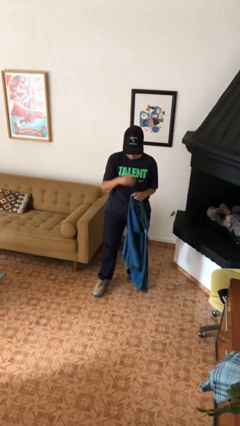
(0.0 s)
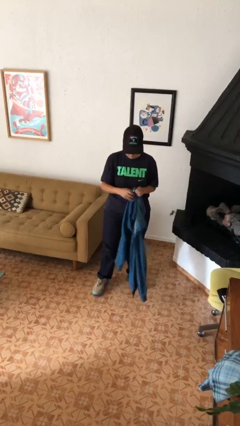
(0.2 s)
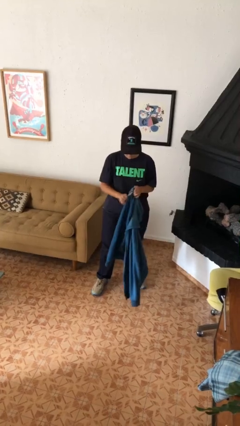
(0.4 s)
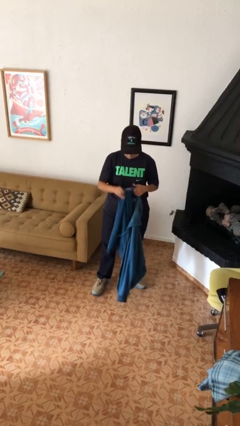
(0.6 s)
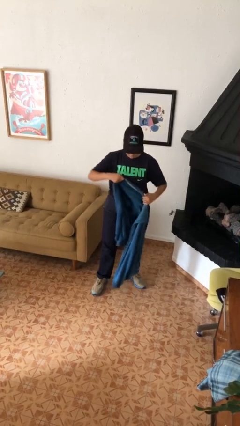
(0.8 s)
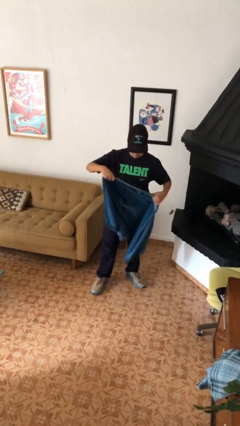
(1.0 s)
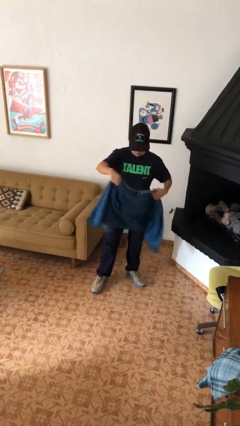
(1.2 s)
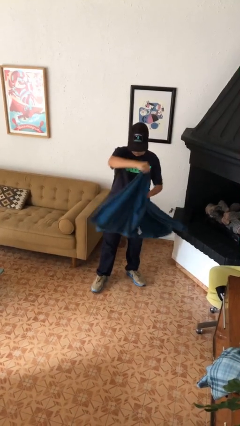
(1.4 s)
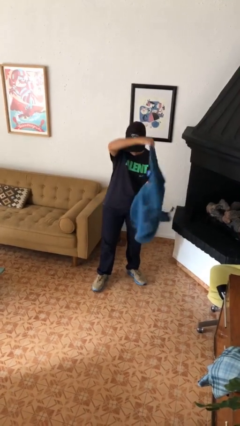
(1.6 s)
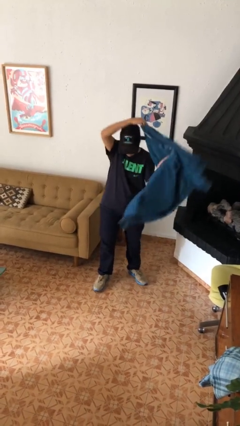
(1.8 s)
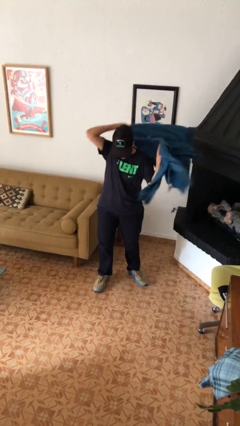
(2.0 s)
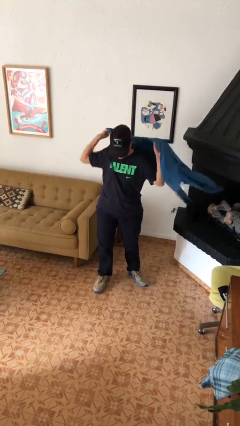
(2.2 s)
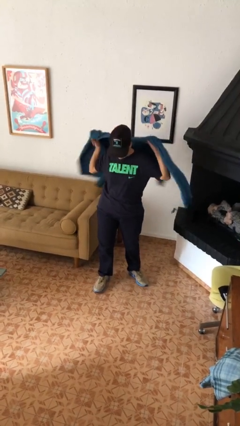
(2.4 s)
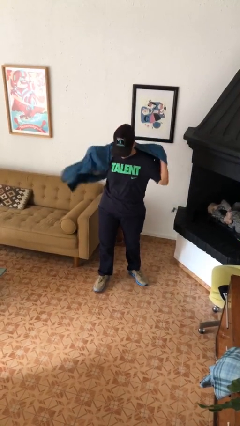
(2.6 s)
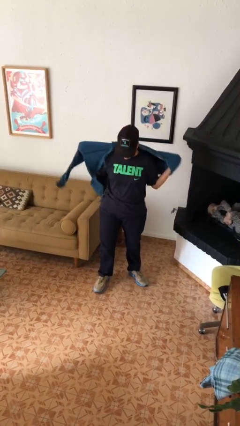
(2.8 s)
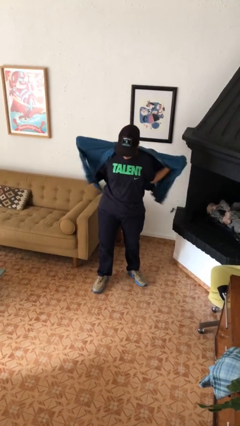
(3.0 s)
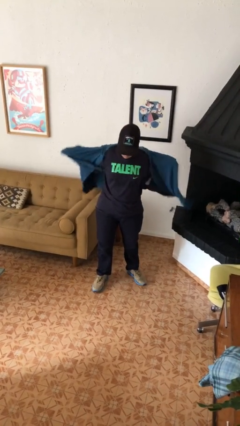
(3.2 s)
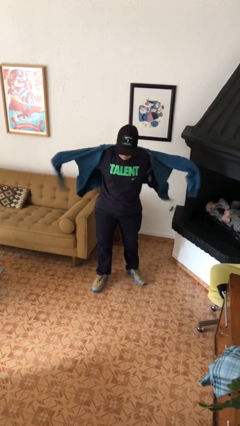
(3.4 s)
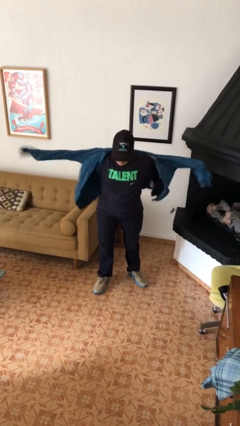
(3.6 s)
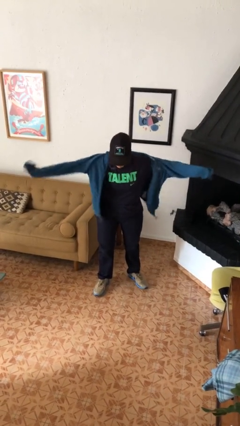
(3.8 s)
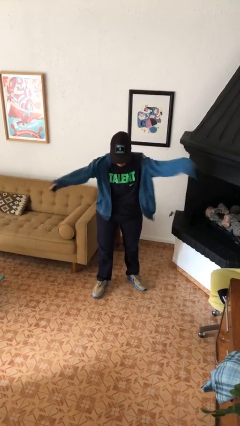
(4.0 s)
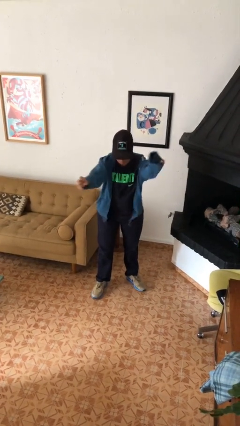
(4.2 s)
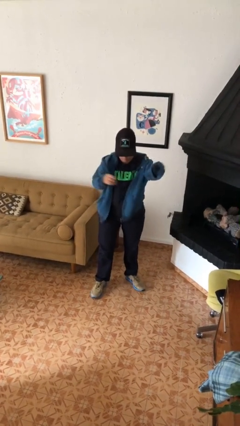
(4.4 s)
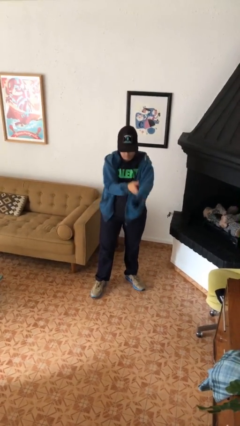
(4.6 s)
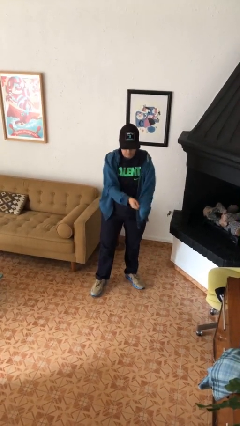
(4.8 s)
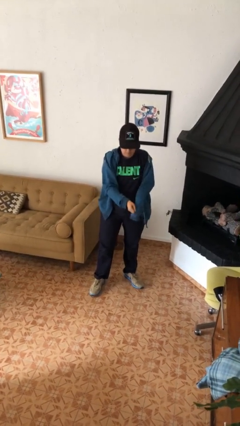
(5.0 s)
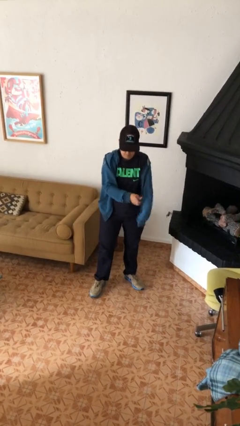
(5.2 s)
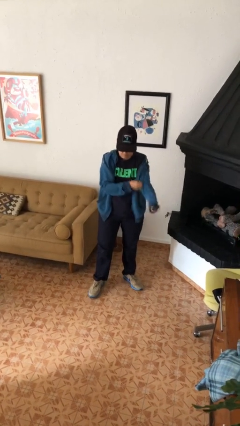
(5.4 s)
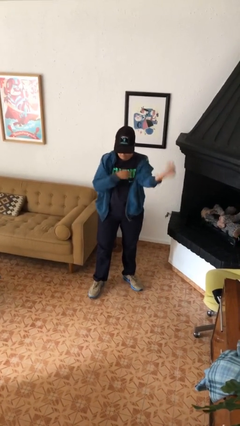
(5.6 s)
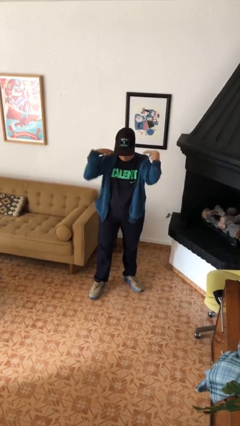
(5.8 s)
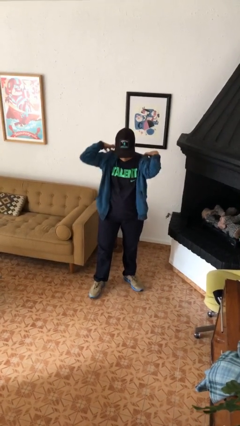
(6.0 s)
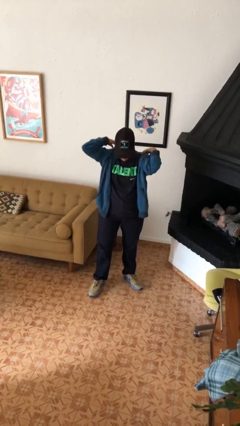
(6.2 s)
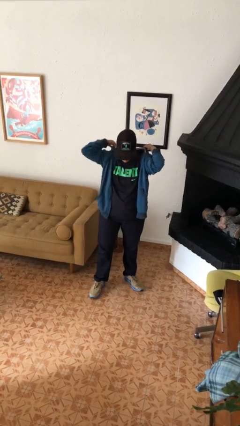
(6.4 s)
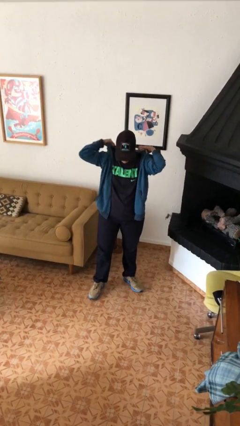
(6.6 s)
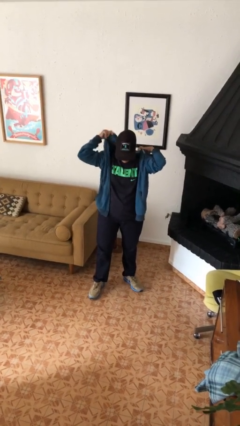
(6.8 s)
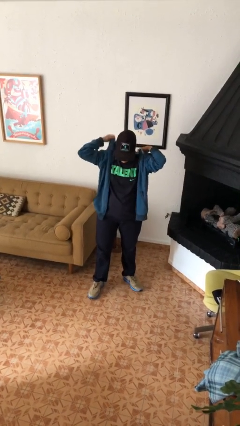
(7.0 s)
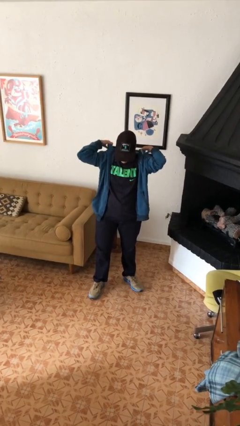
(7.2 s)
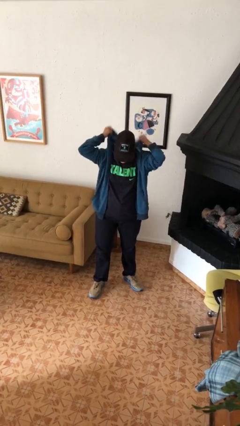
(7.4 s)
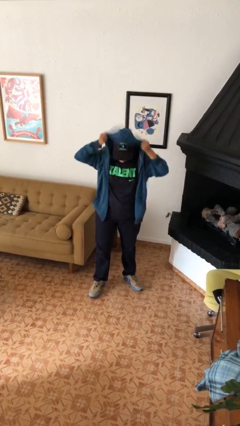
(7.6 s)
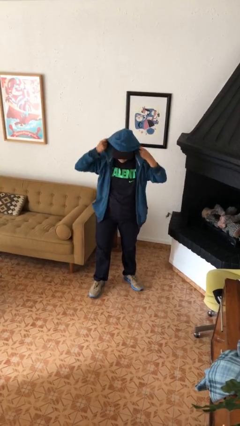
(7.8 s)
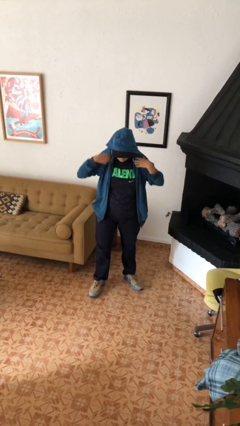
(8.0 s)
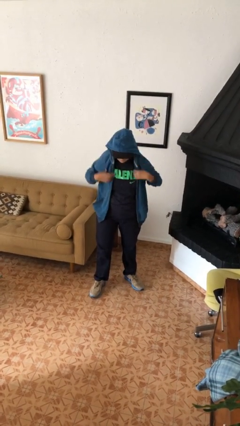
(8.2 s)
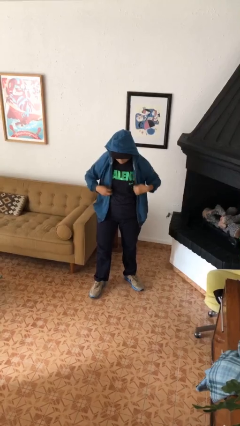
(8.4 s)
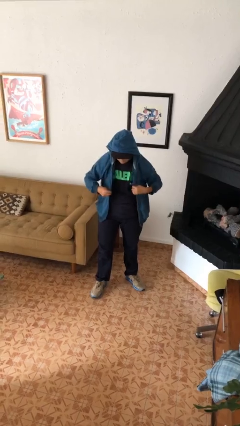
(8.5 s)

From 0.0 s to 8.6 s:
person puts on hoodie

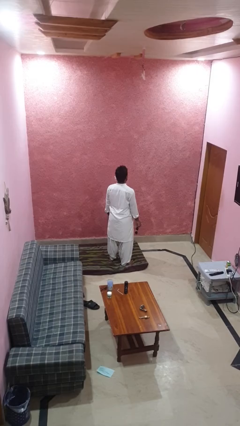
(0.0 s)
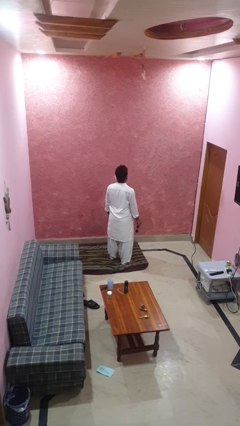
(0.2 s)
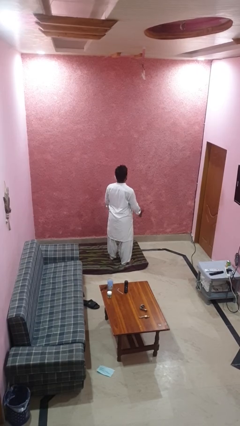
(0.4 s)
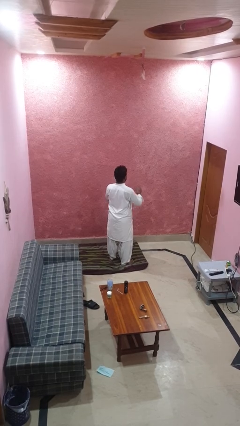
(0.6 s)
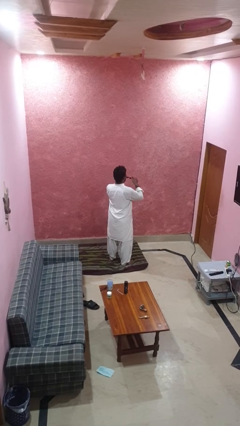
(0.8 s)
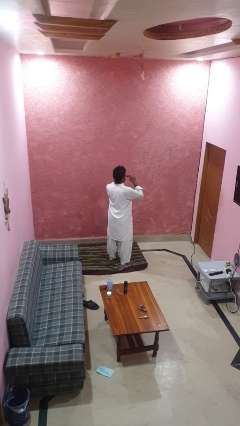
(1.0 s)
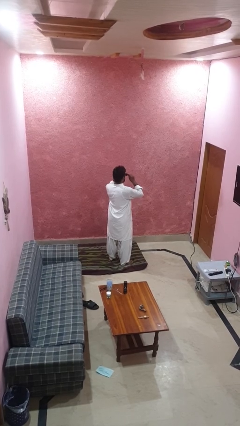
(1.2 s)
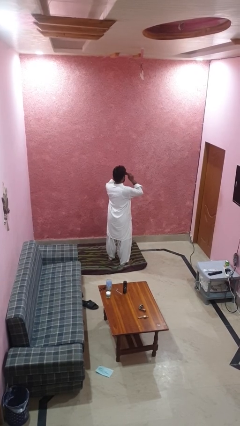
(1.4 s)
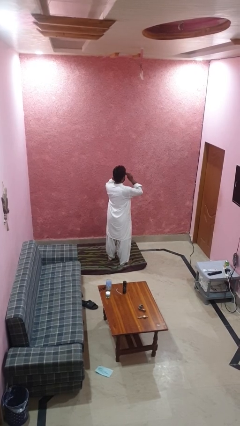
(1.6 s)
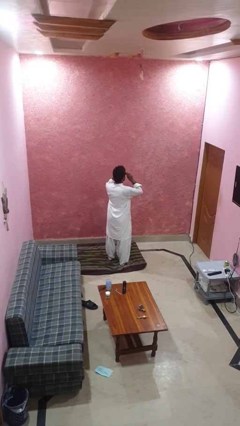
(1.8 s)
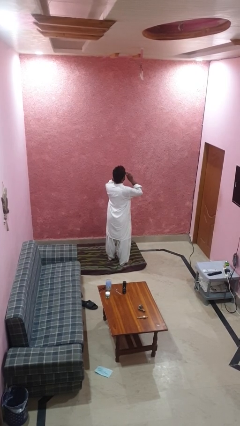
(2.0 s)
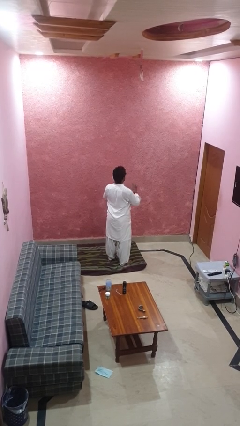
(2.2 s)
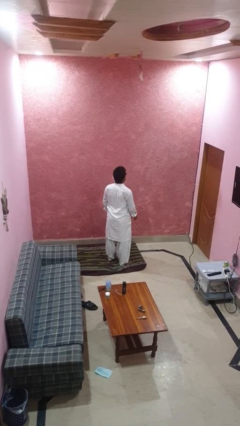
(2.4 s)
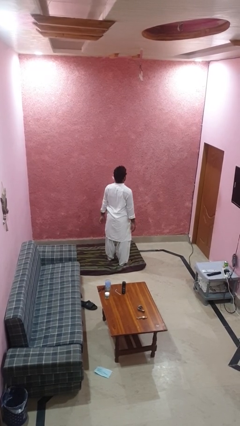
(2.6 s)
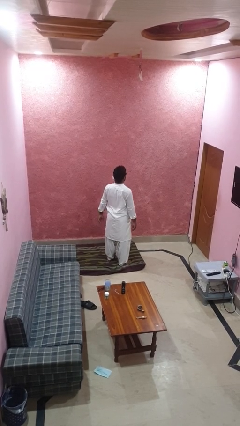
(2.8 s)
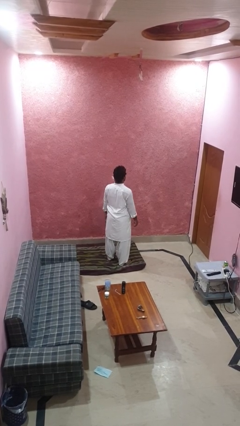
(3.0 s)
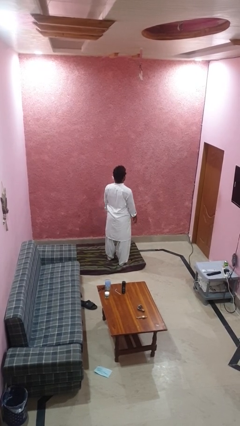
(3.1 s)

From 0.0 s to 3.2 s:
person puts on sunglasses

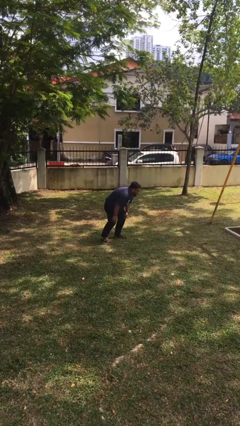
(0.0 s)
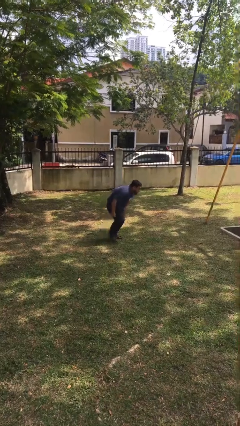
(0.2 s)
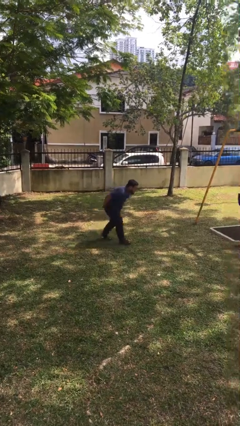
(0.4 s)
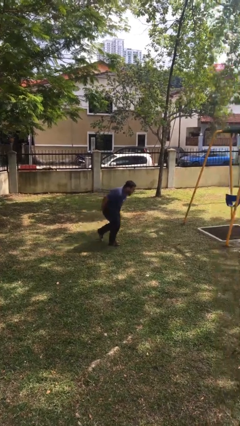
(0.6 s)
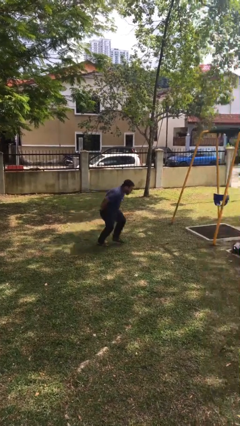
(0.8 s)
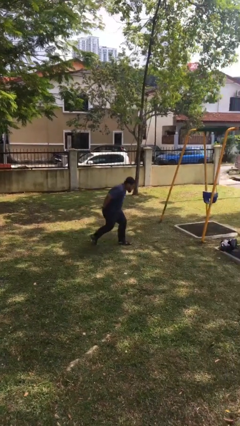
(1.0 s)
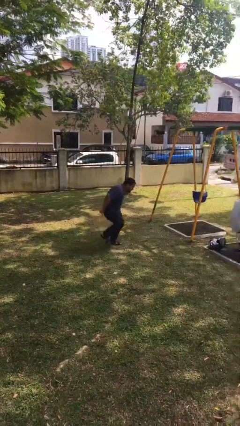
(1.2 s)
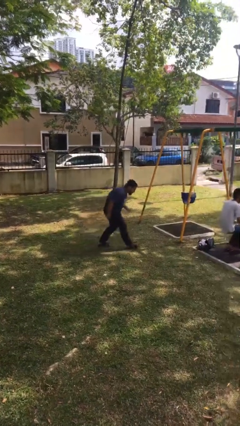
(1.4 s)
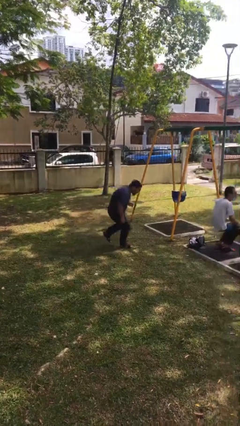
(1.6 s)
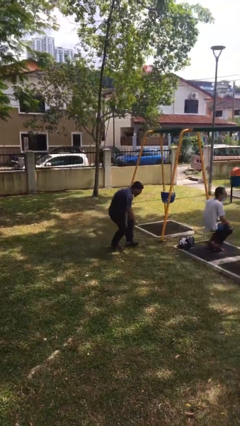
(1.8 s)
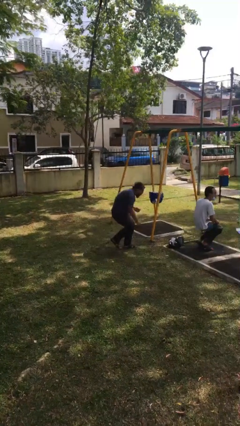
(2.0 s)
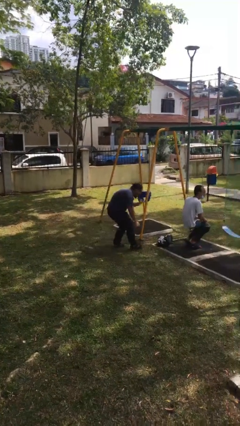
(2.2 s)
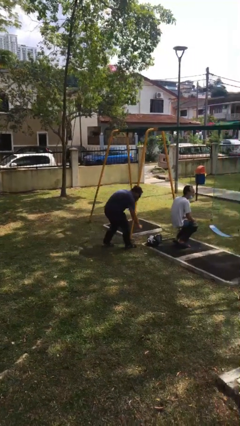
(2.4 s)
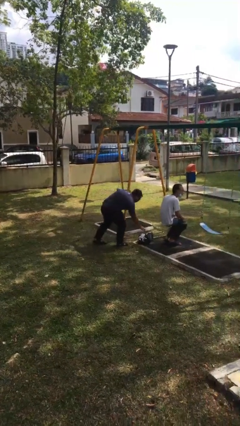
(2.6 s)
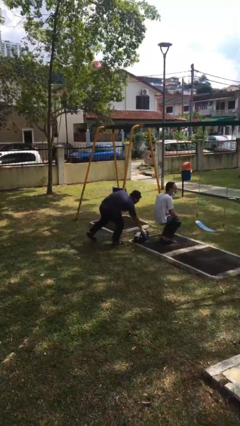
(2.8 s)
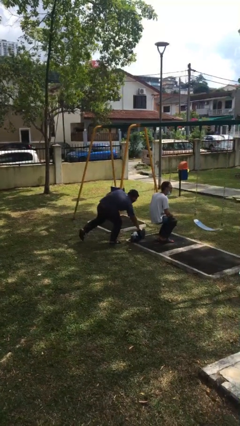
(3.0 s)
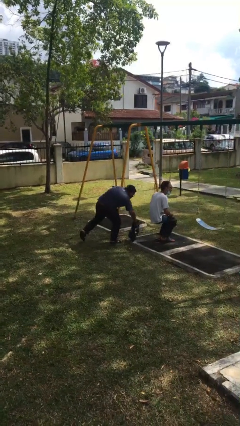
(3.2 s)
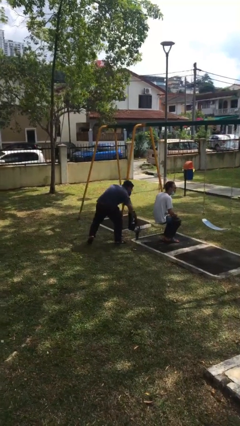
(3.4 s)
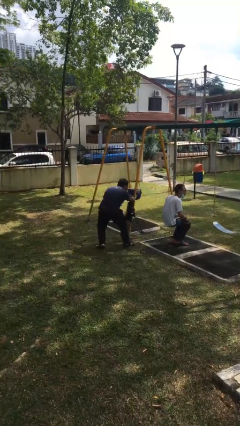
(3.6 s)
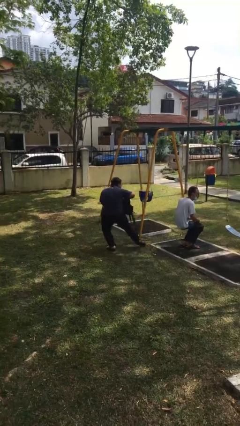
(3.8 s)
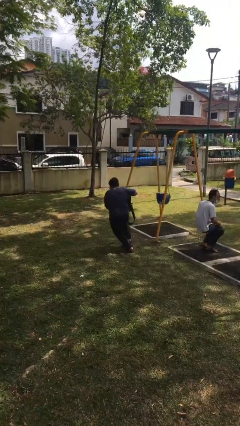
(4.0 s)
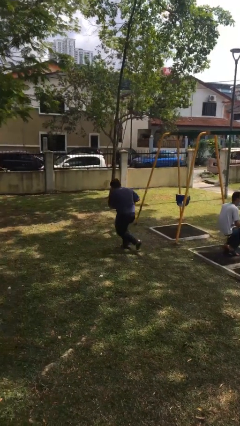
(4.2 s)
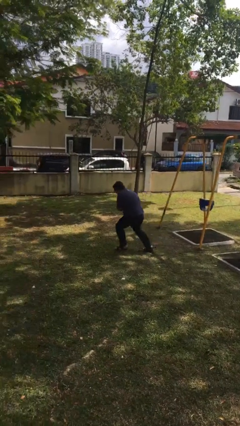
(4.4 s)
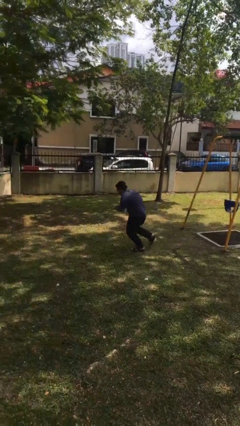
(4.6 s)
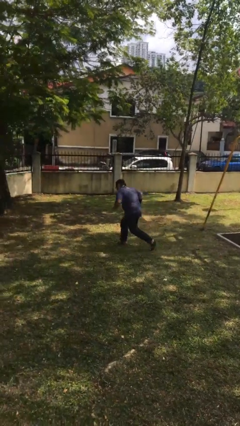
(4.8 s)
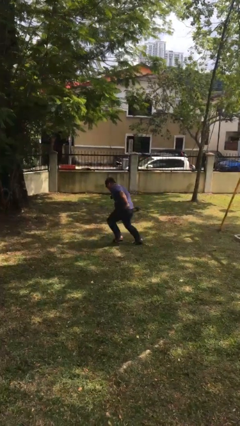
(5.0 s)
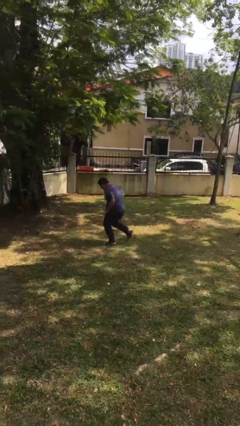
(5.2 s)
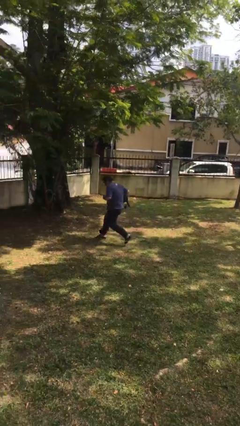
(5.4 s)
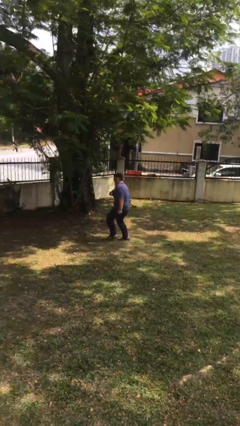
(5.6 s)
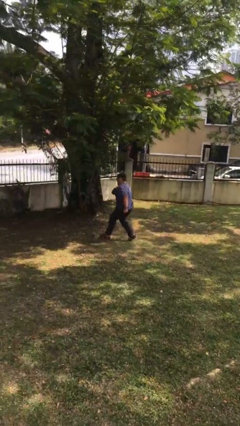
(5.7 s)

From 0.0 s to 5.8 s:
person steals object from person

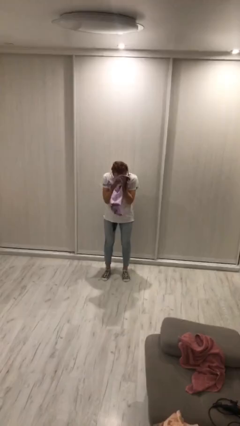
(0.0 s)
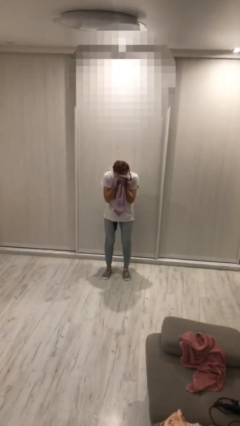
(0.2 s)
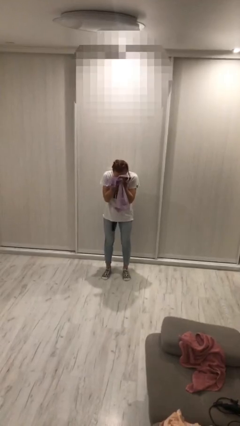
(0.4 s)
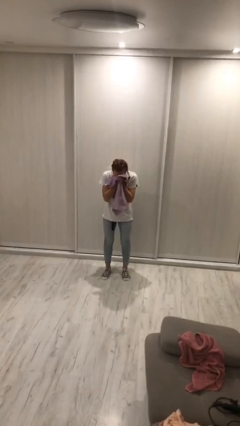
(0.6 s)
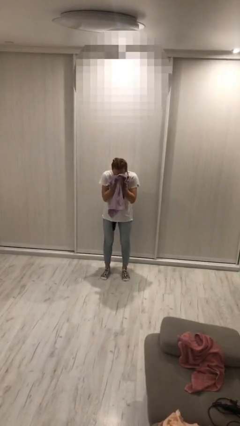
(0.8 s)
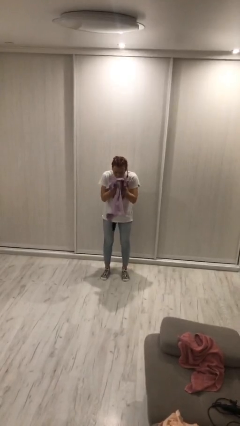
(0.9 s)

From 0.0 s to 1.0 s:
person blows nose
